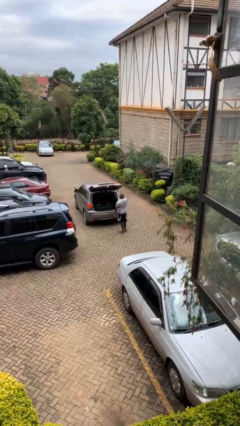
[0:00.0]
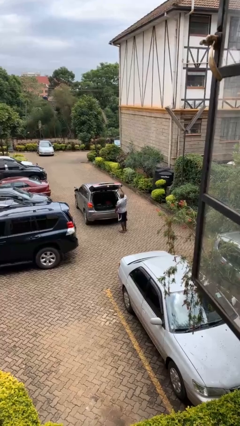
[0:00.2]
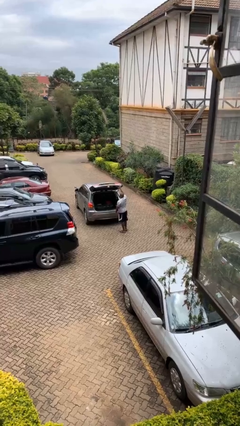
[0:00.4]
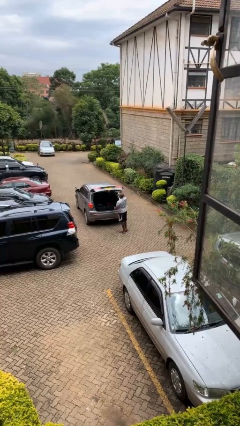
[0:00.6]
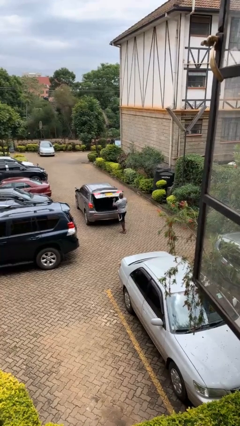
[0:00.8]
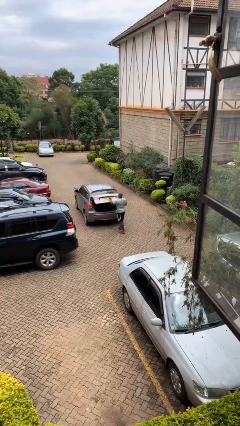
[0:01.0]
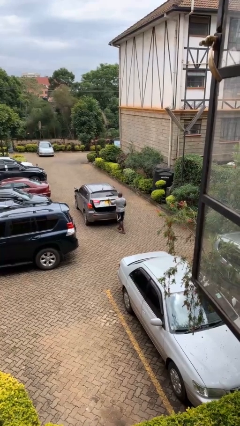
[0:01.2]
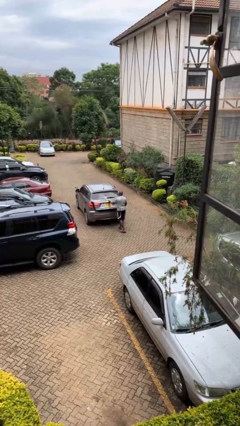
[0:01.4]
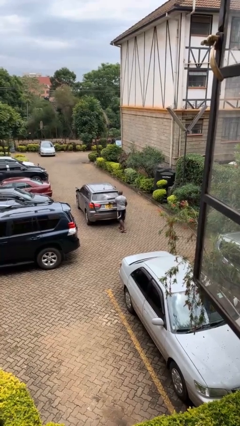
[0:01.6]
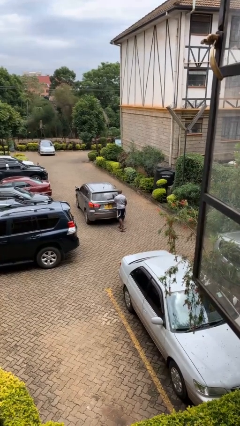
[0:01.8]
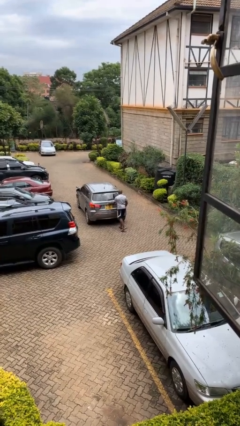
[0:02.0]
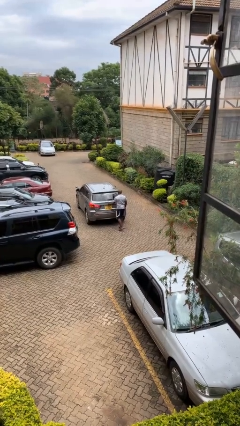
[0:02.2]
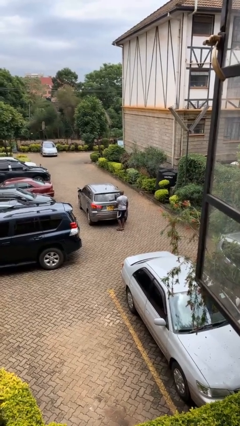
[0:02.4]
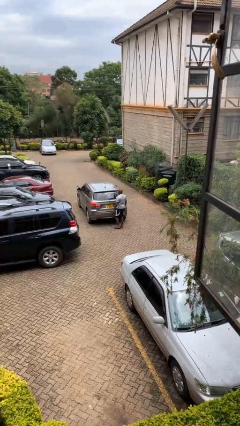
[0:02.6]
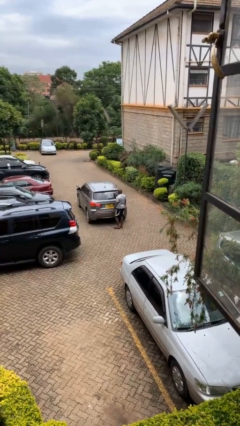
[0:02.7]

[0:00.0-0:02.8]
person closes car trunk

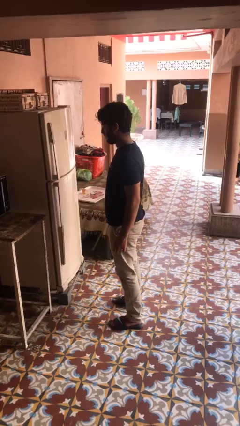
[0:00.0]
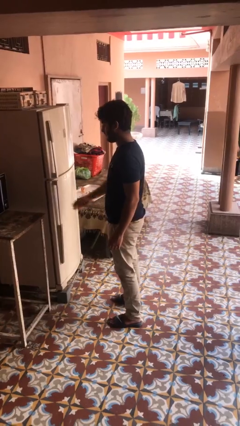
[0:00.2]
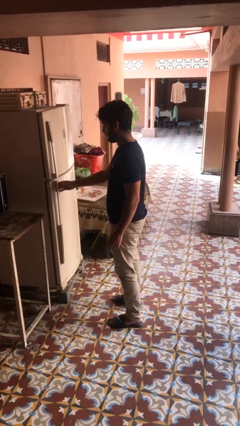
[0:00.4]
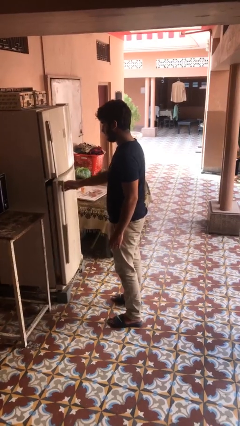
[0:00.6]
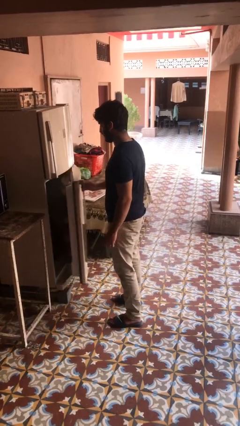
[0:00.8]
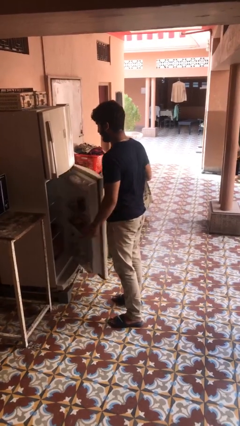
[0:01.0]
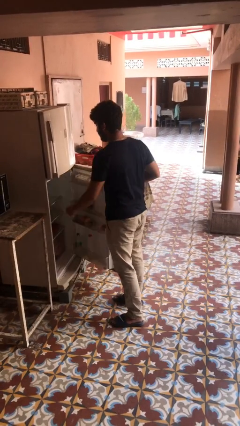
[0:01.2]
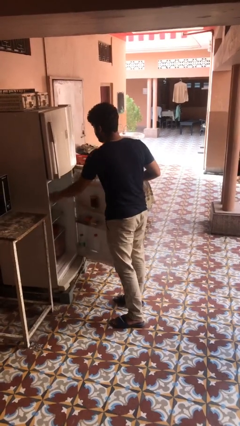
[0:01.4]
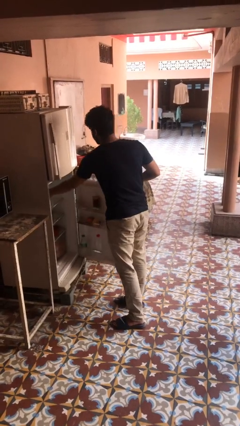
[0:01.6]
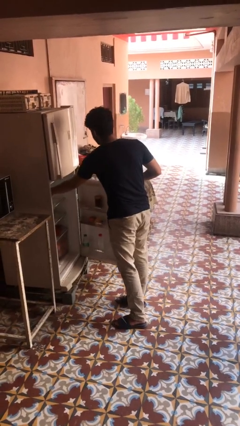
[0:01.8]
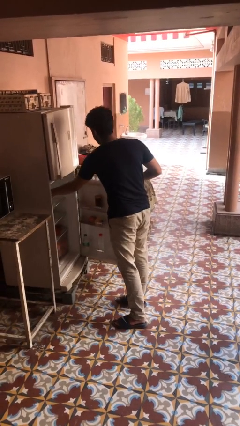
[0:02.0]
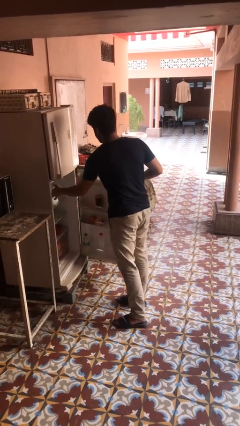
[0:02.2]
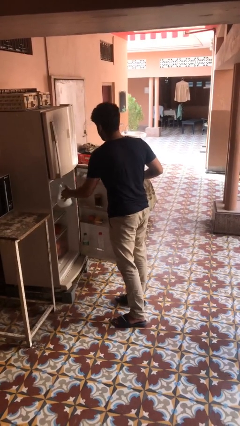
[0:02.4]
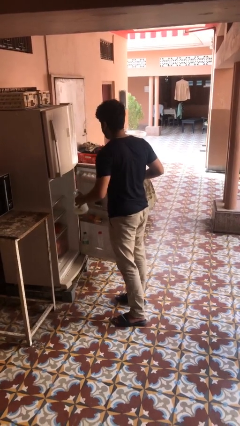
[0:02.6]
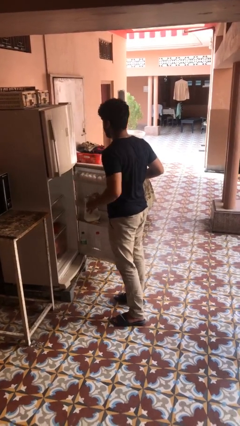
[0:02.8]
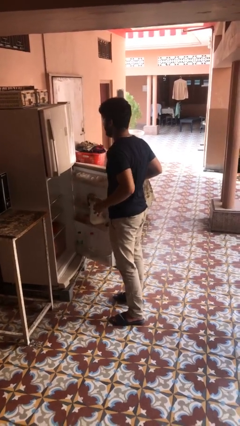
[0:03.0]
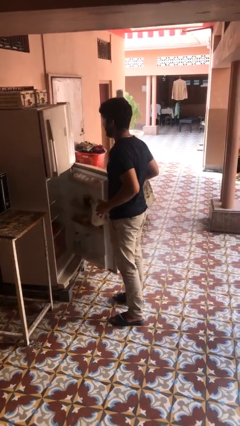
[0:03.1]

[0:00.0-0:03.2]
person takes object from refrigerator

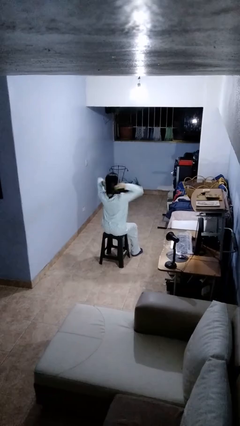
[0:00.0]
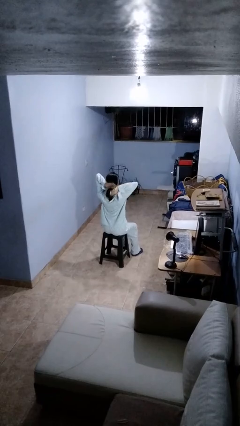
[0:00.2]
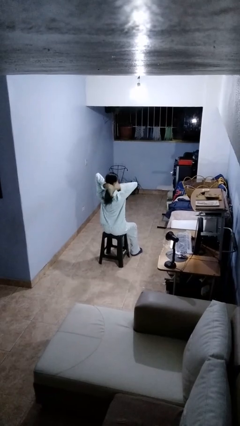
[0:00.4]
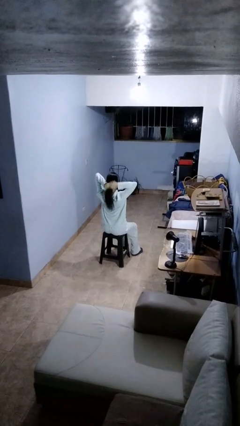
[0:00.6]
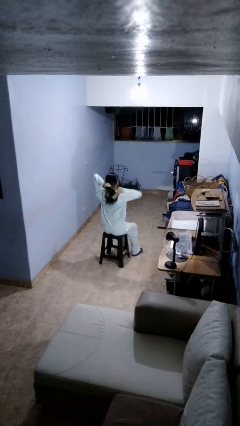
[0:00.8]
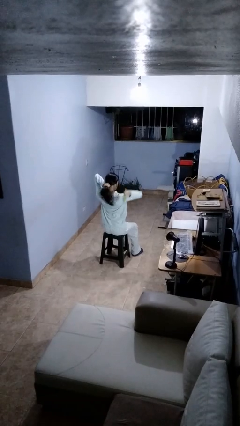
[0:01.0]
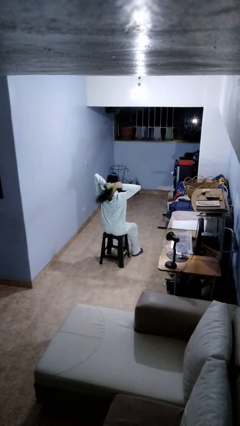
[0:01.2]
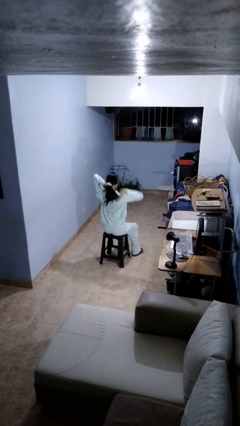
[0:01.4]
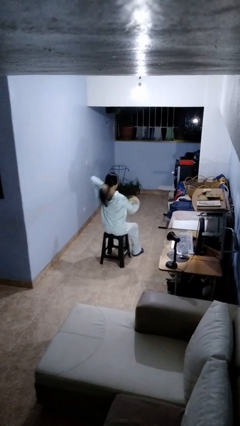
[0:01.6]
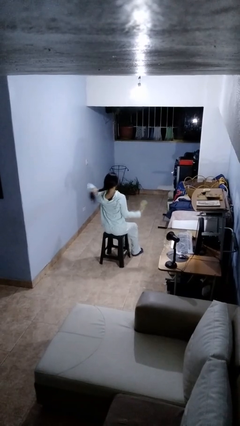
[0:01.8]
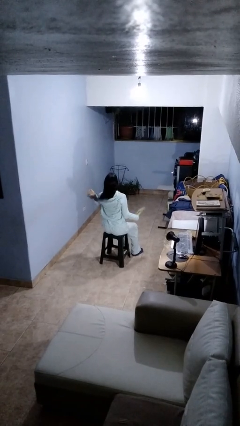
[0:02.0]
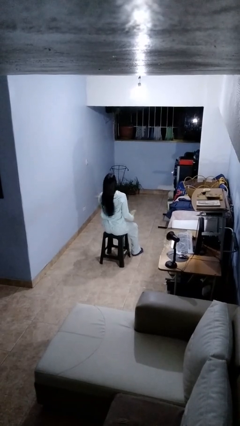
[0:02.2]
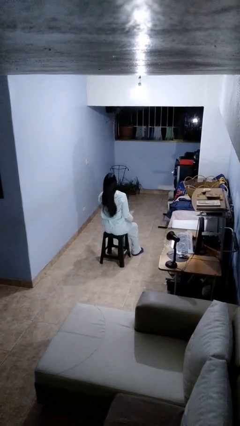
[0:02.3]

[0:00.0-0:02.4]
person brushes hair

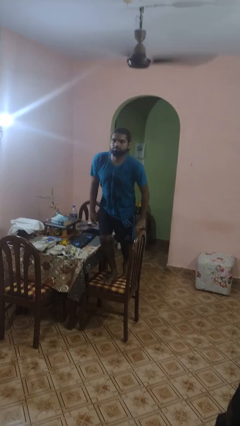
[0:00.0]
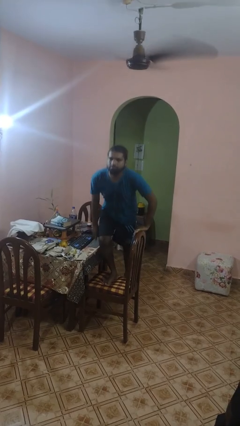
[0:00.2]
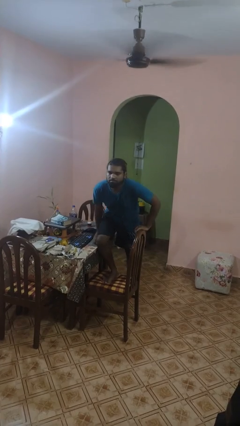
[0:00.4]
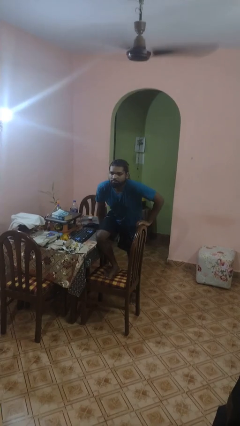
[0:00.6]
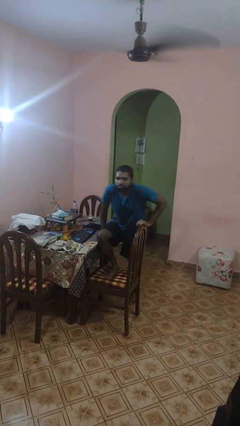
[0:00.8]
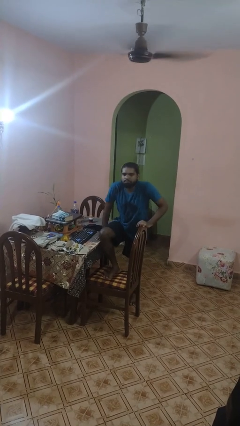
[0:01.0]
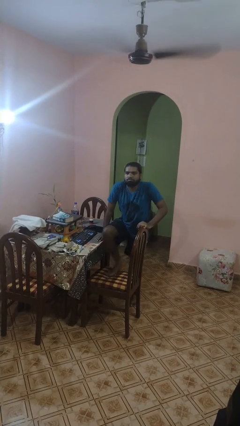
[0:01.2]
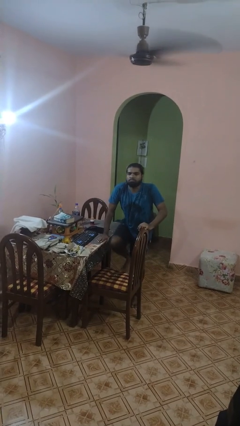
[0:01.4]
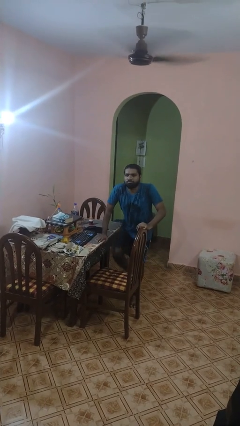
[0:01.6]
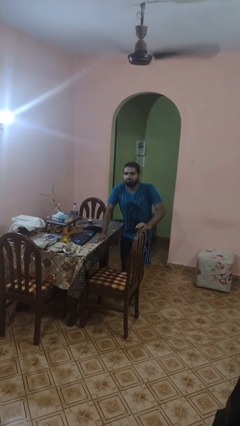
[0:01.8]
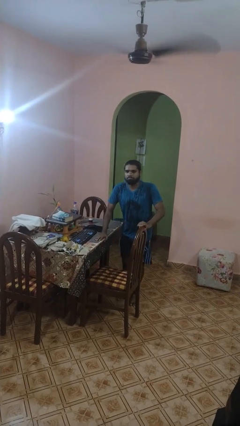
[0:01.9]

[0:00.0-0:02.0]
person climbs off chair

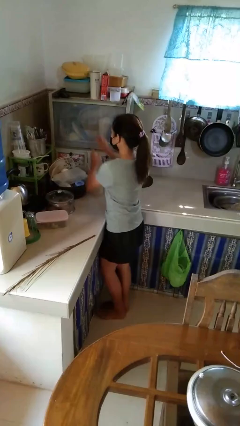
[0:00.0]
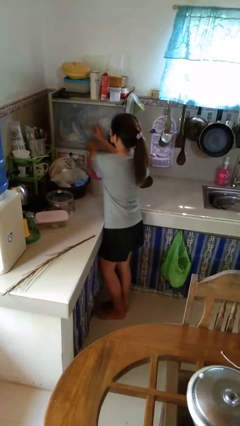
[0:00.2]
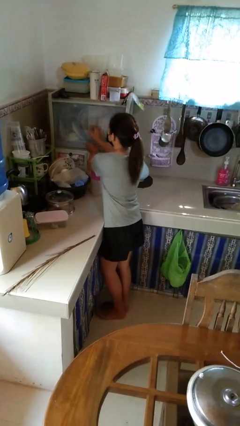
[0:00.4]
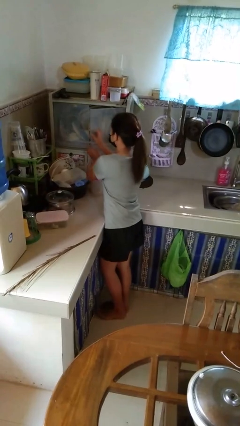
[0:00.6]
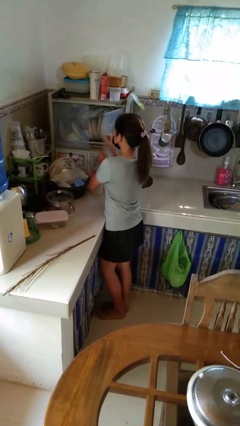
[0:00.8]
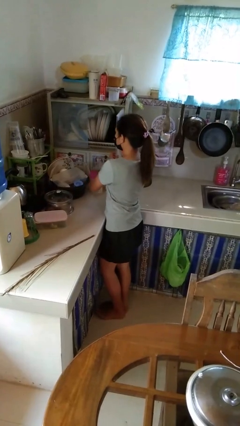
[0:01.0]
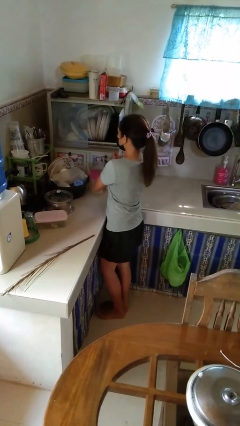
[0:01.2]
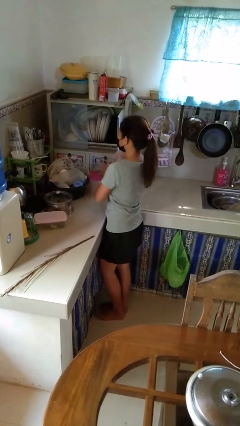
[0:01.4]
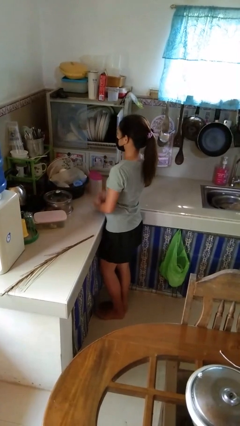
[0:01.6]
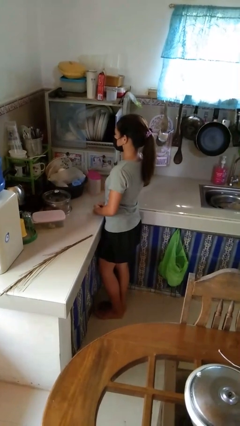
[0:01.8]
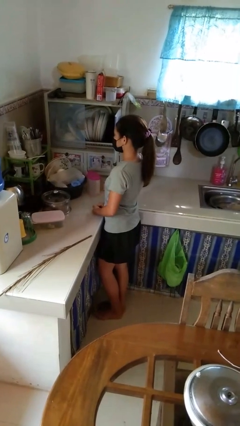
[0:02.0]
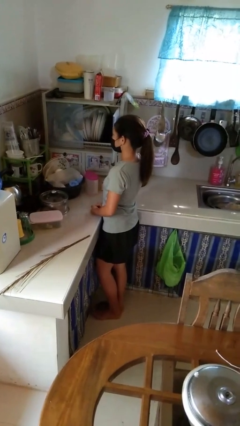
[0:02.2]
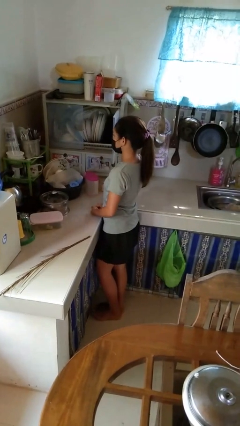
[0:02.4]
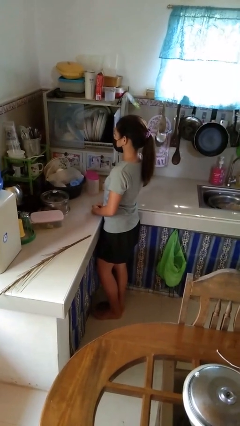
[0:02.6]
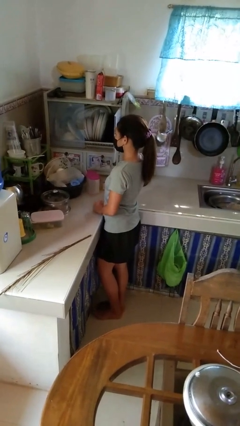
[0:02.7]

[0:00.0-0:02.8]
person opens kitchen drawer

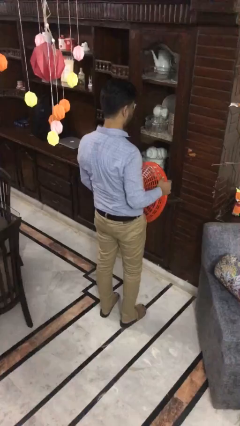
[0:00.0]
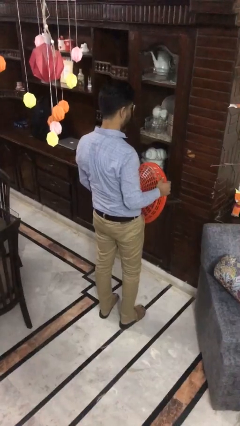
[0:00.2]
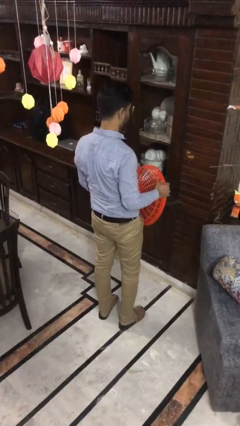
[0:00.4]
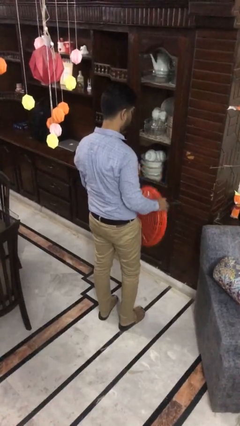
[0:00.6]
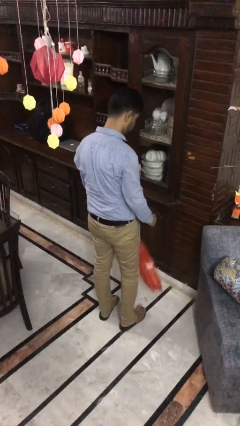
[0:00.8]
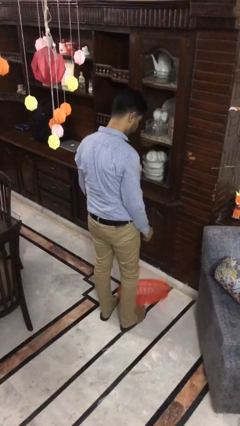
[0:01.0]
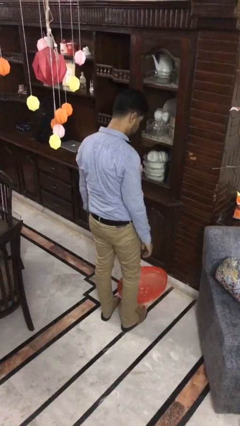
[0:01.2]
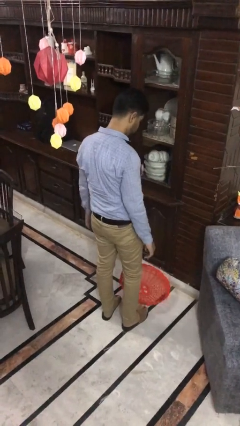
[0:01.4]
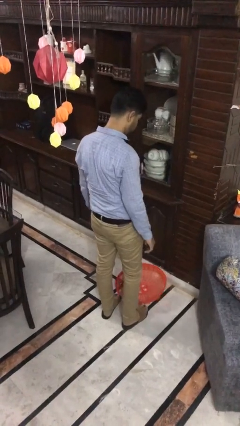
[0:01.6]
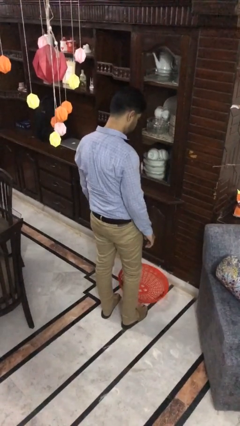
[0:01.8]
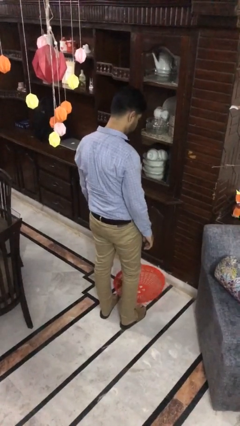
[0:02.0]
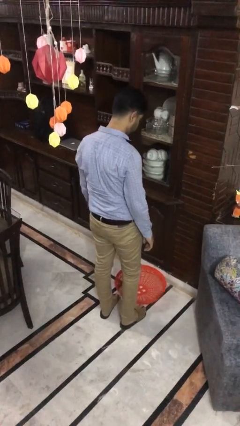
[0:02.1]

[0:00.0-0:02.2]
person drops object

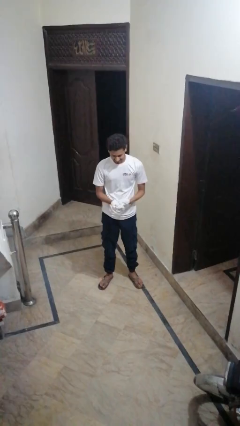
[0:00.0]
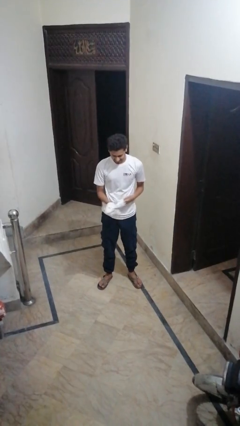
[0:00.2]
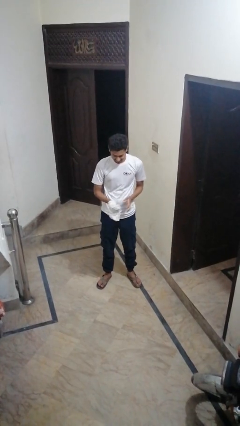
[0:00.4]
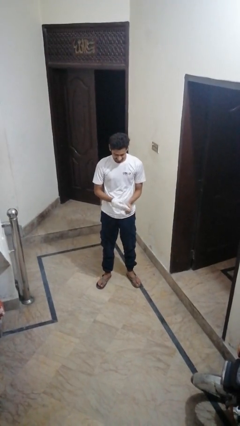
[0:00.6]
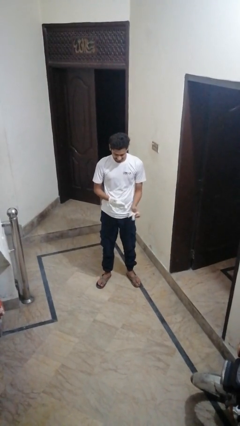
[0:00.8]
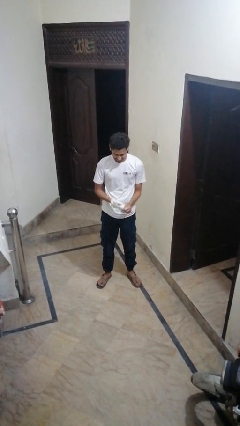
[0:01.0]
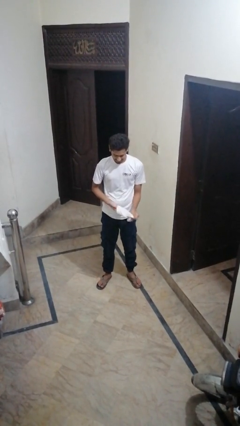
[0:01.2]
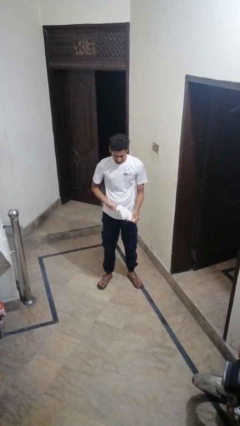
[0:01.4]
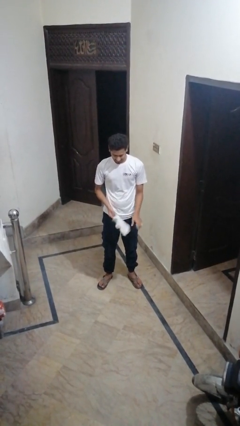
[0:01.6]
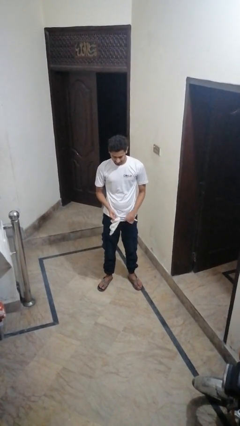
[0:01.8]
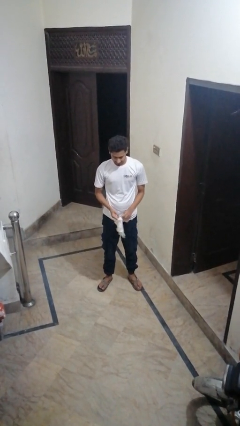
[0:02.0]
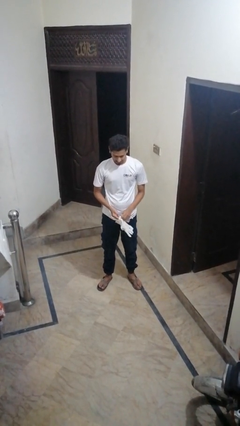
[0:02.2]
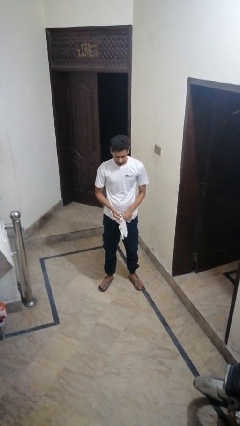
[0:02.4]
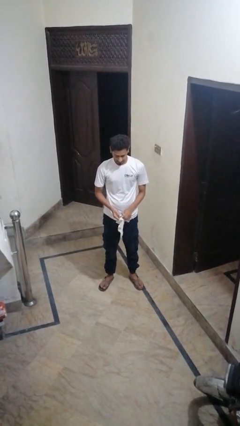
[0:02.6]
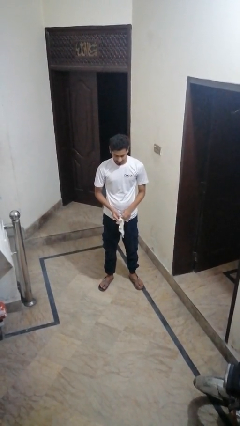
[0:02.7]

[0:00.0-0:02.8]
person takes off gloves
